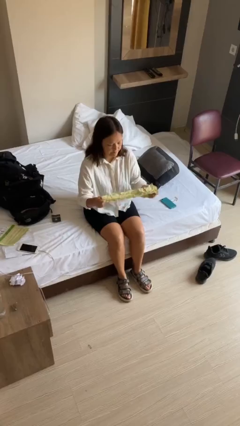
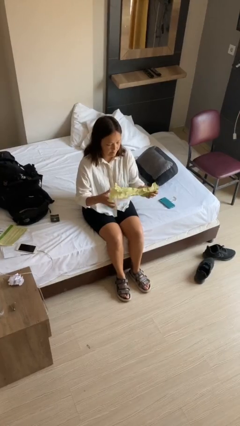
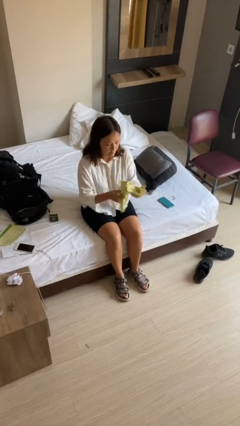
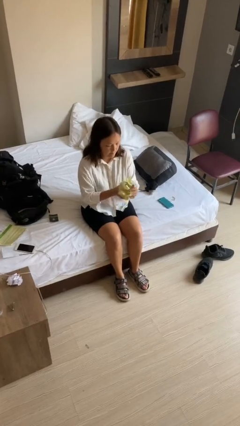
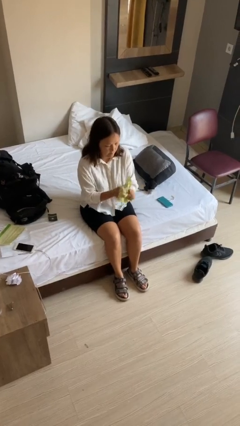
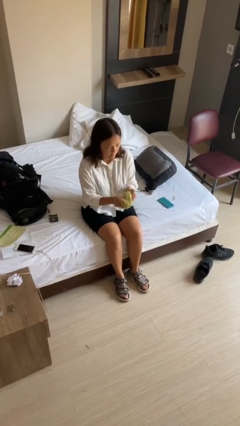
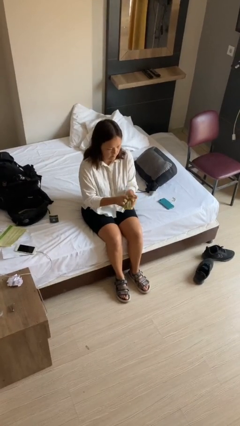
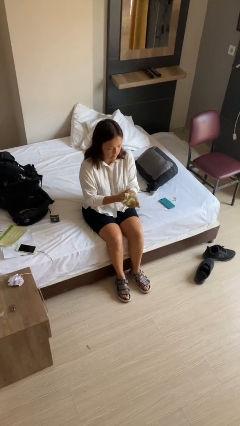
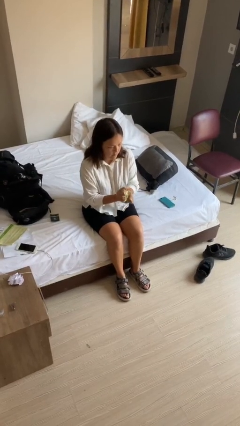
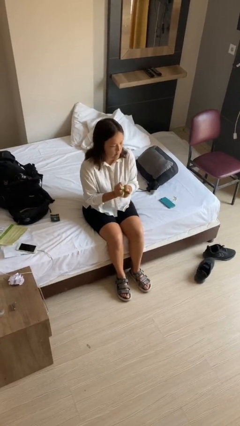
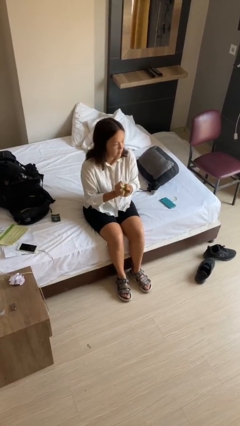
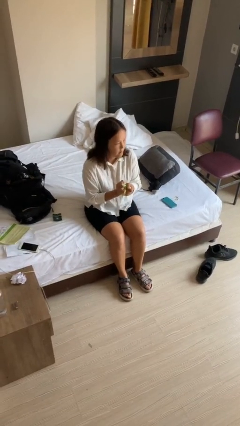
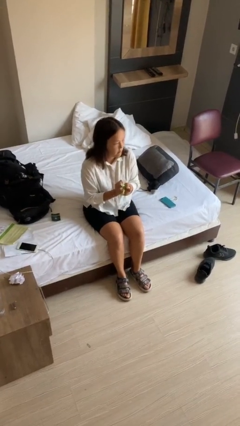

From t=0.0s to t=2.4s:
person crumples paper

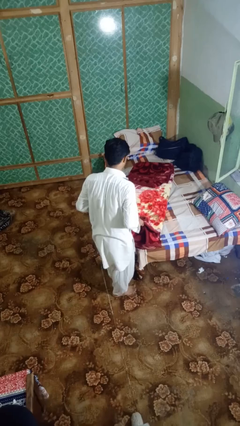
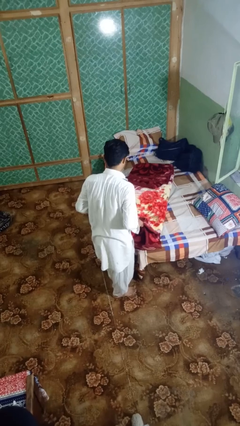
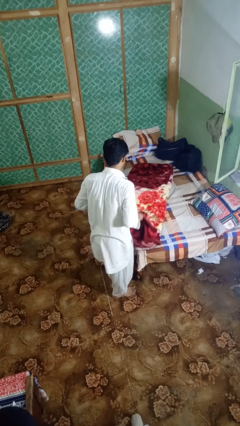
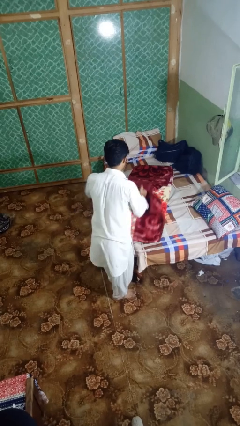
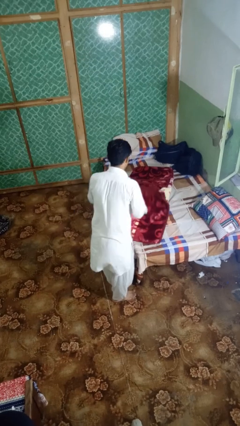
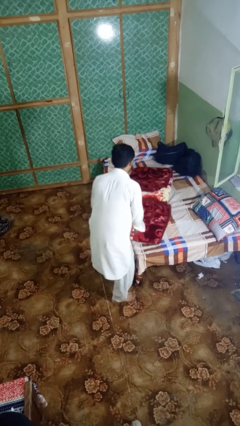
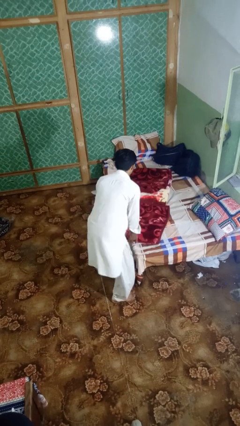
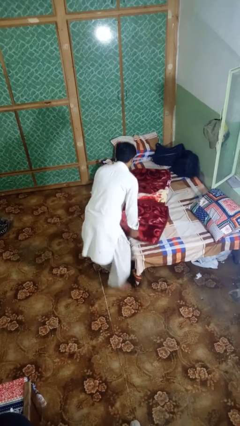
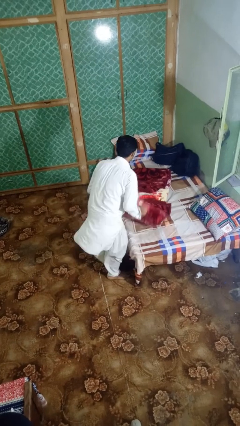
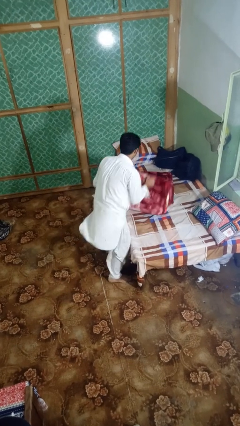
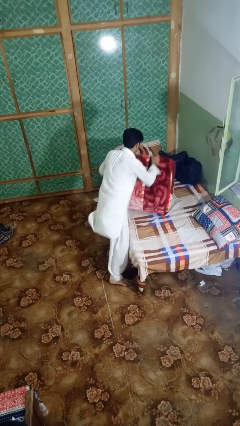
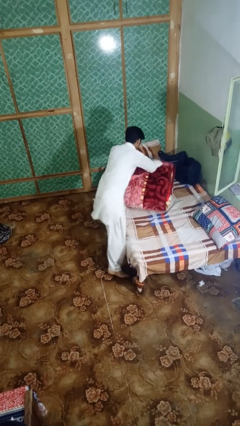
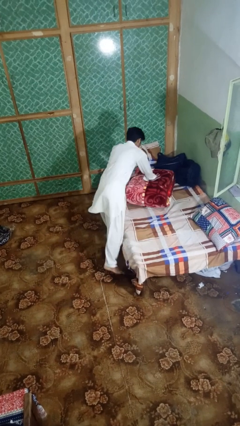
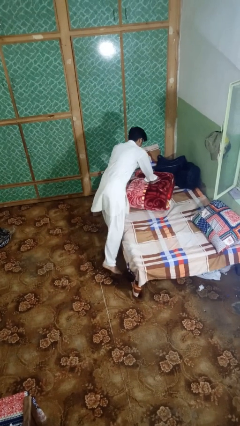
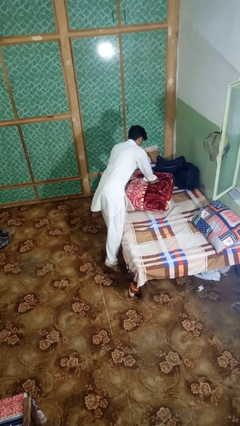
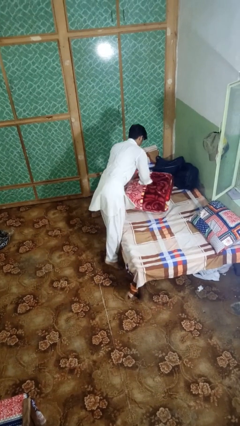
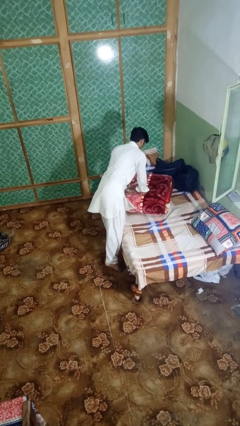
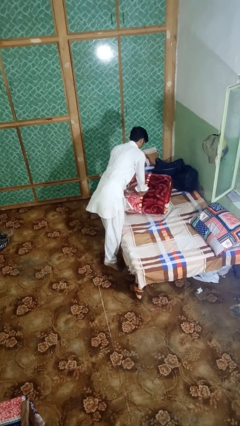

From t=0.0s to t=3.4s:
person folds blanket

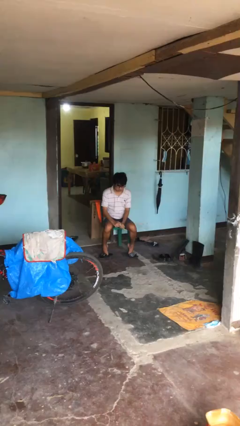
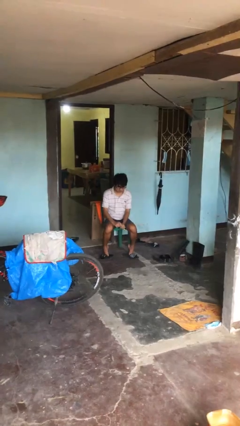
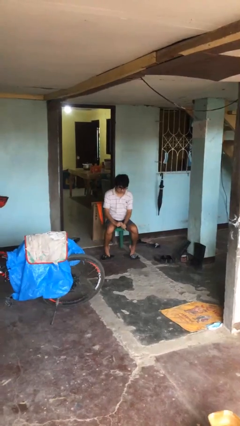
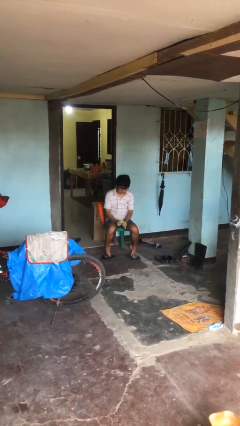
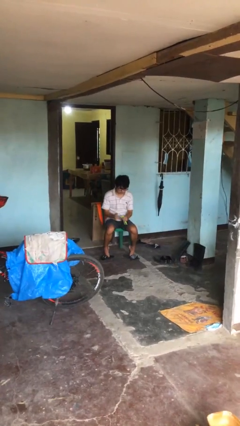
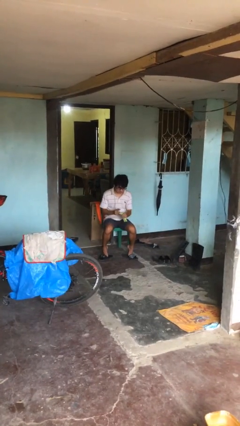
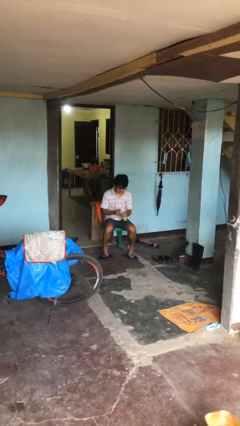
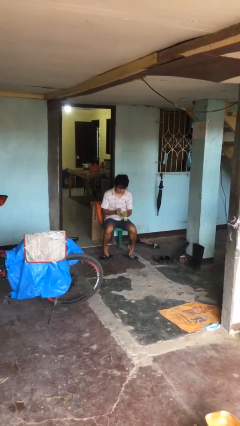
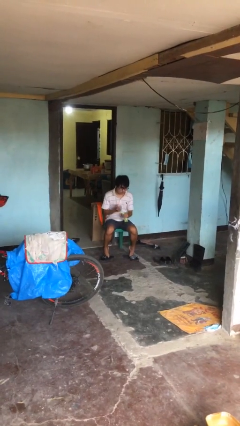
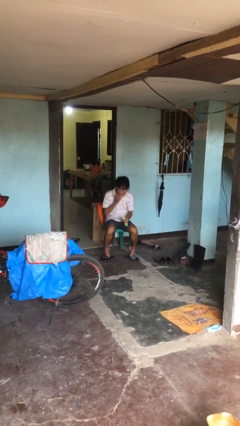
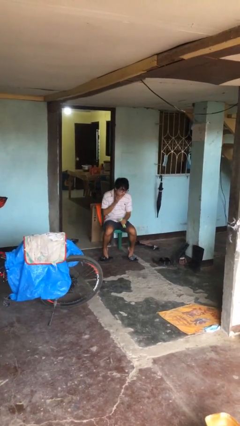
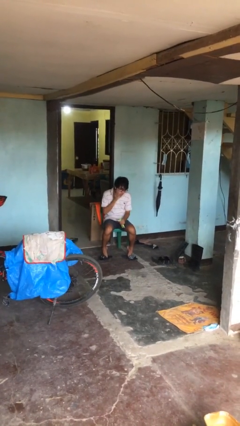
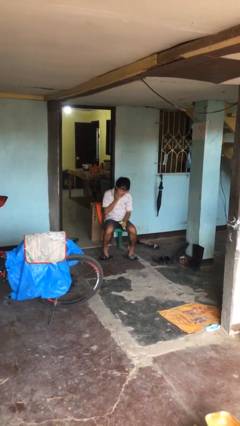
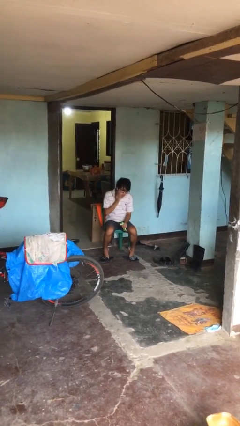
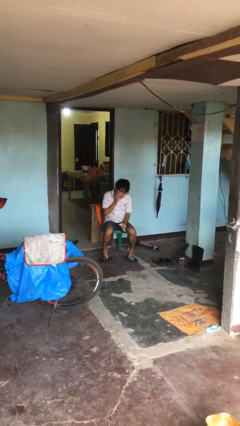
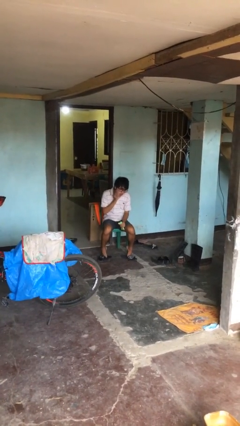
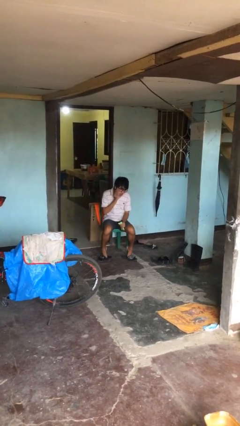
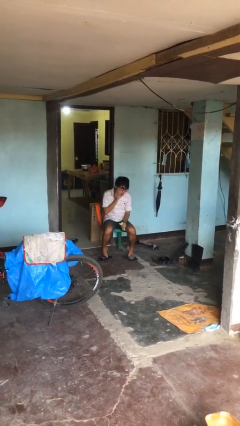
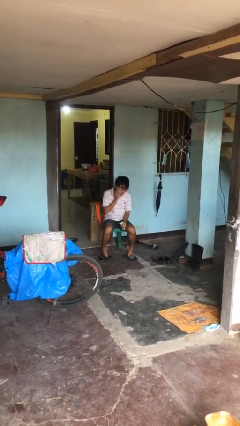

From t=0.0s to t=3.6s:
person applies facial moisturizer

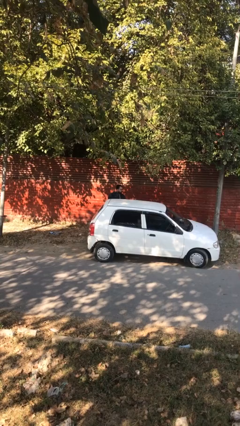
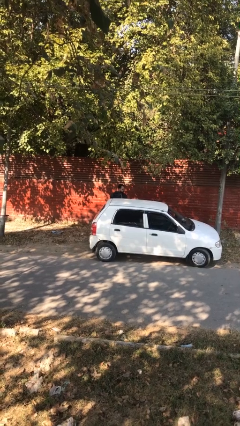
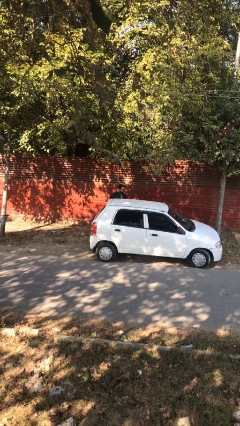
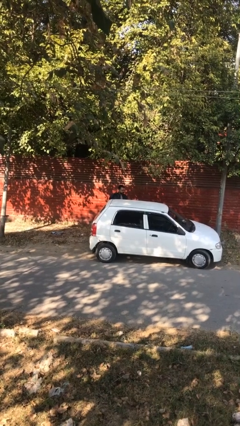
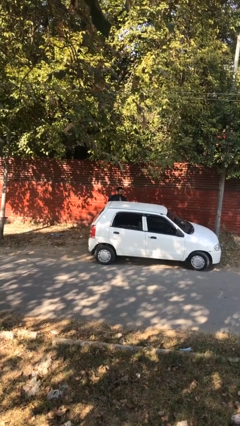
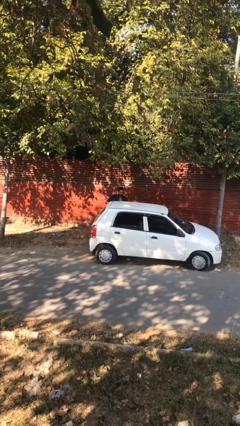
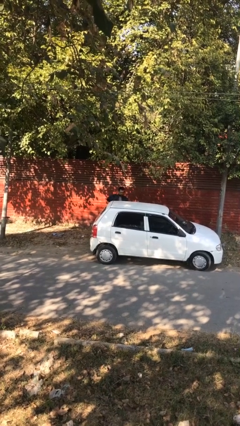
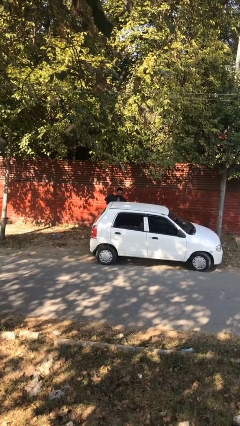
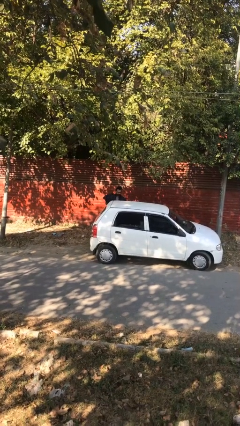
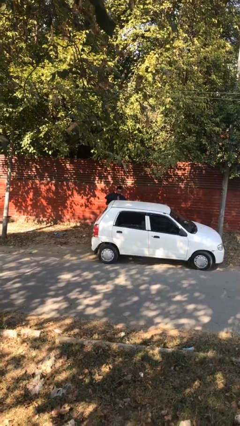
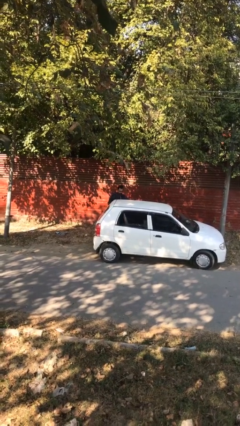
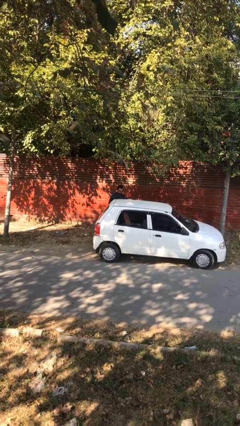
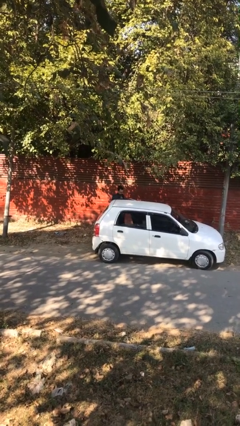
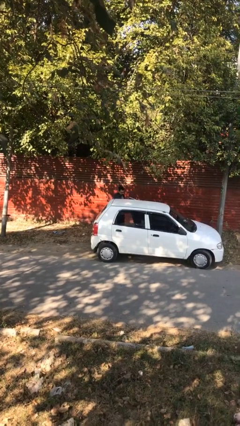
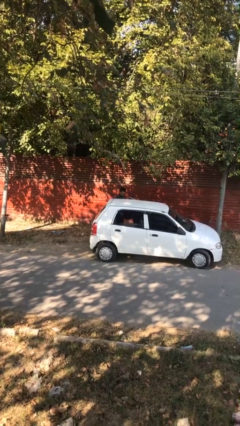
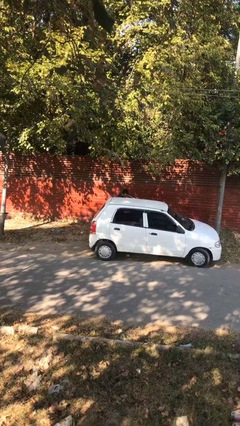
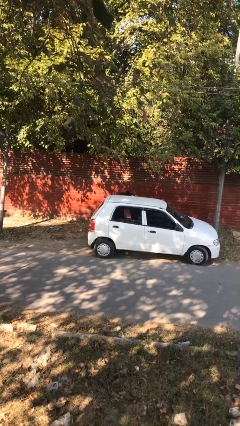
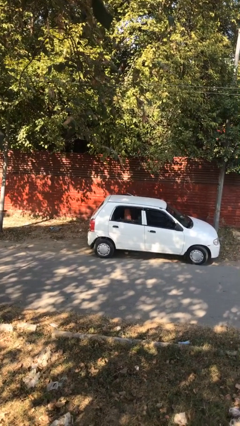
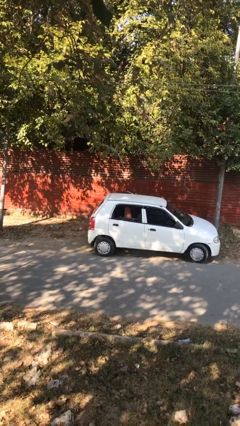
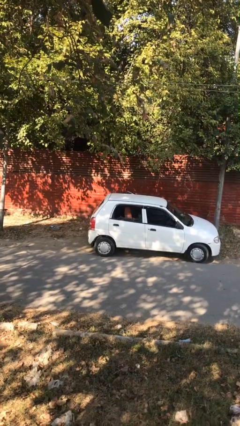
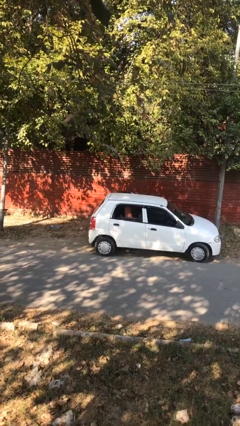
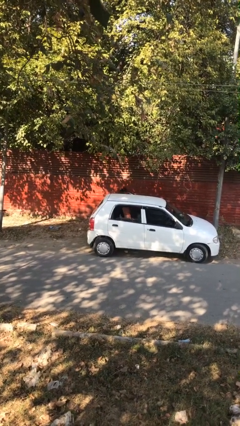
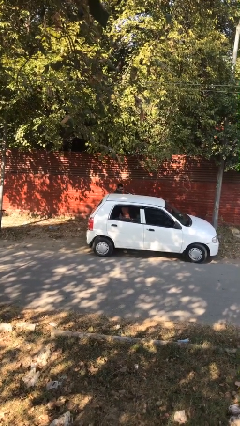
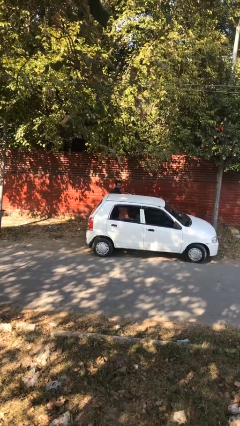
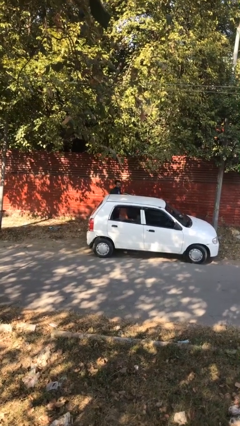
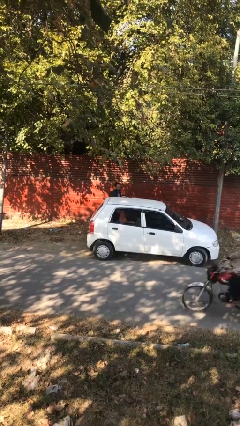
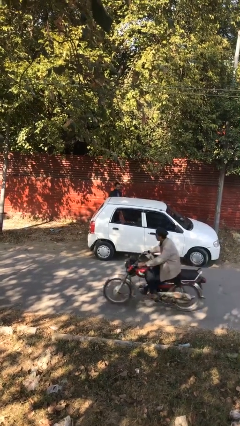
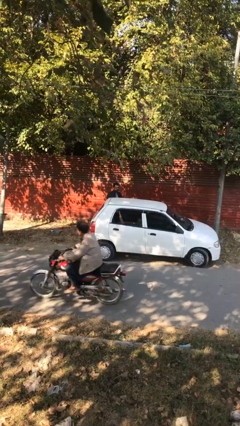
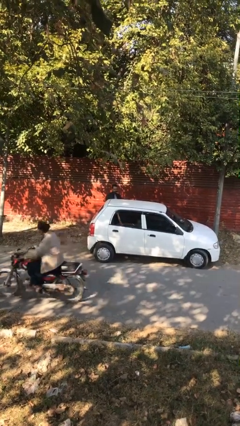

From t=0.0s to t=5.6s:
person loads car

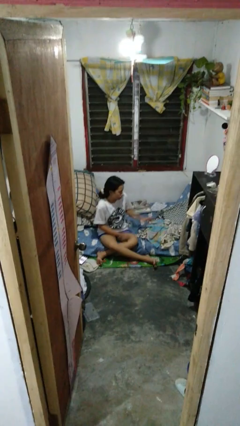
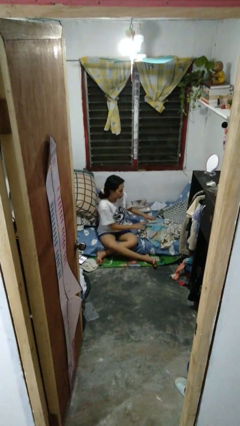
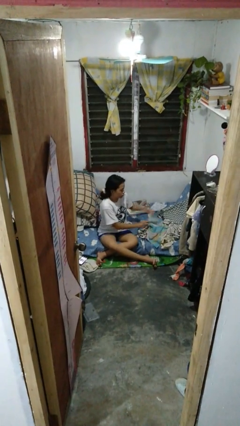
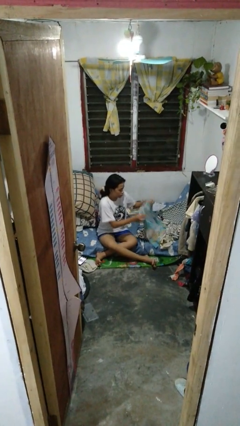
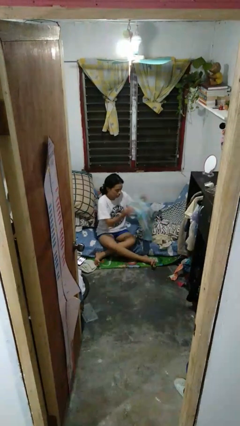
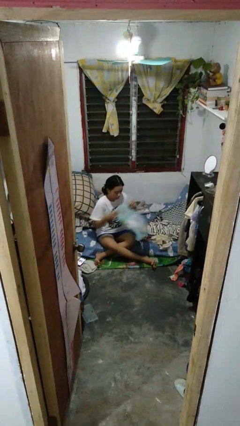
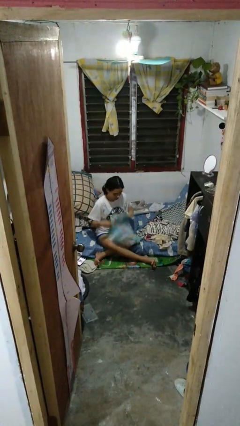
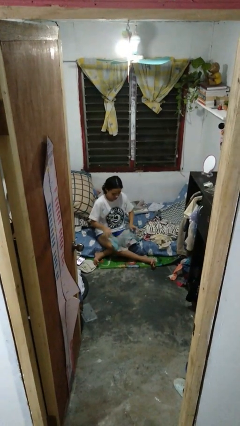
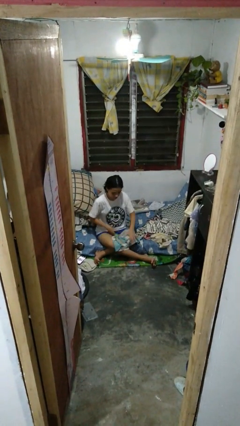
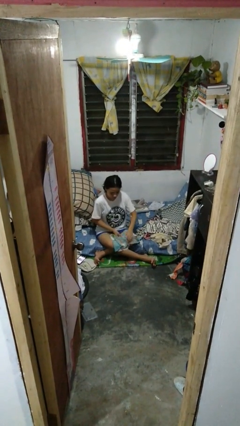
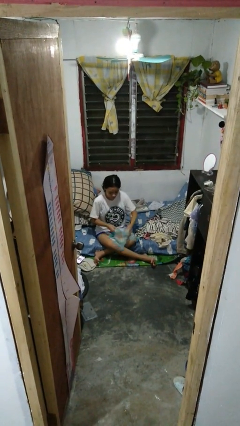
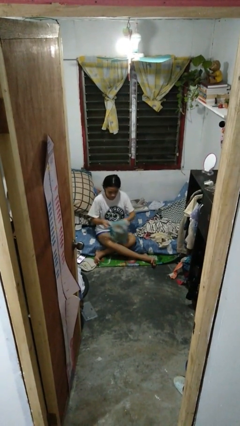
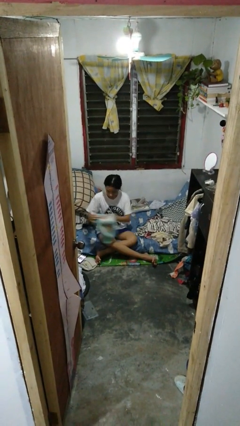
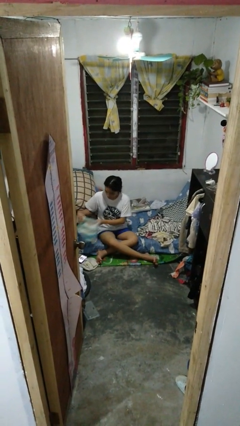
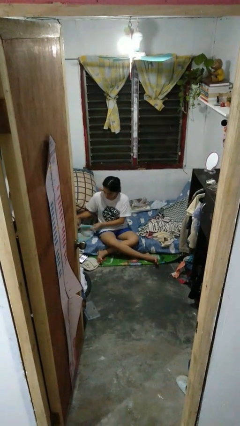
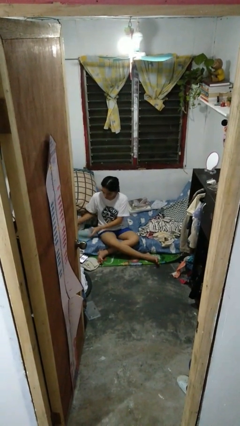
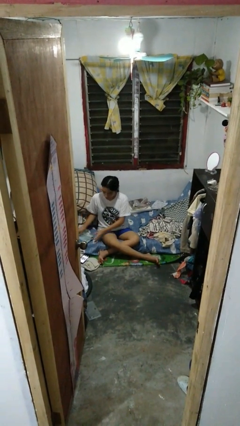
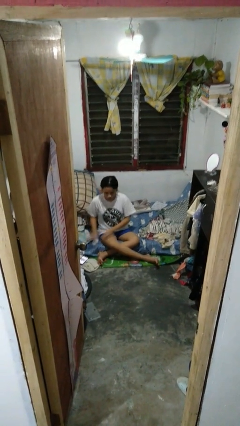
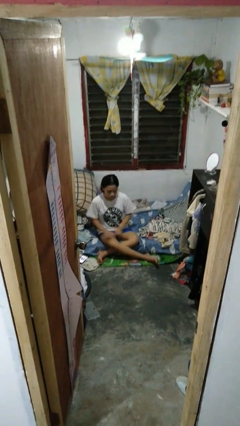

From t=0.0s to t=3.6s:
person folds shirt
